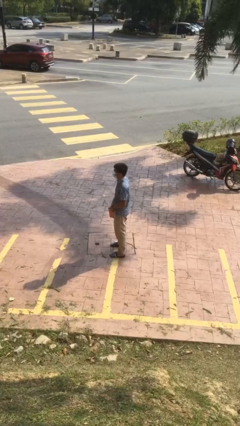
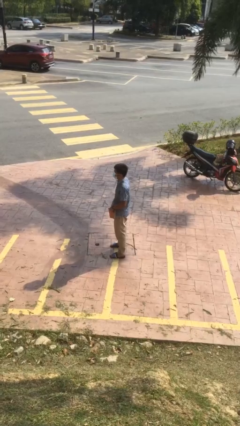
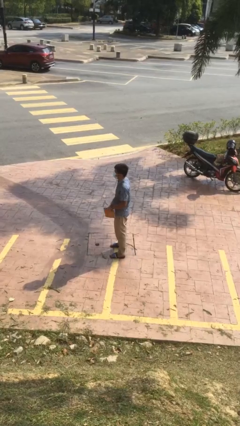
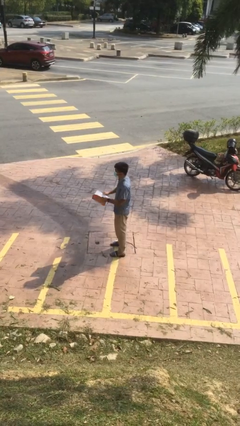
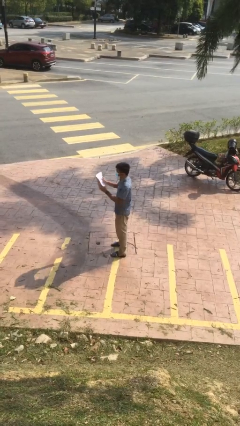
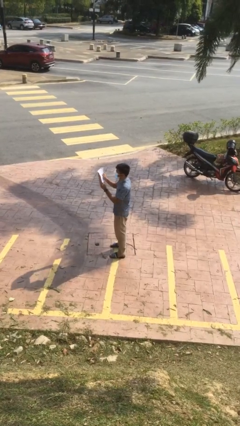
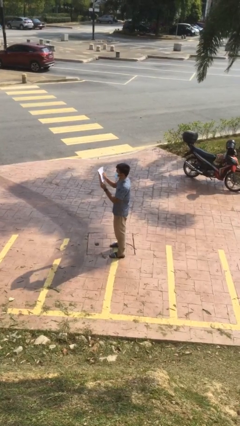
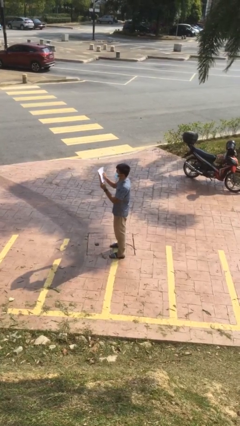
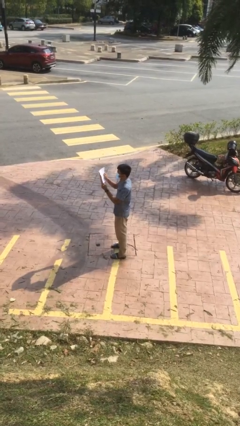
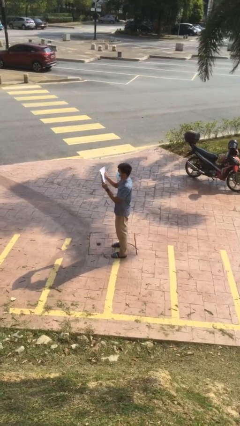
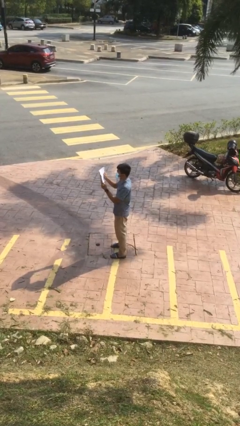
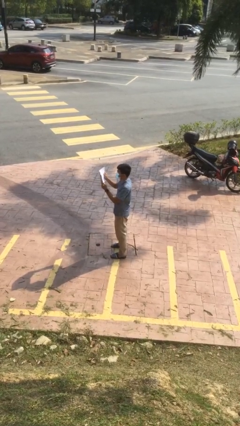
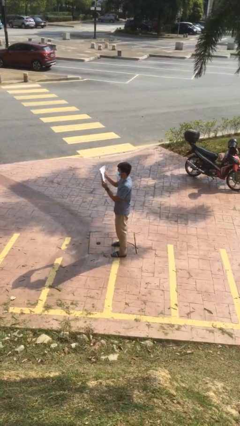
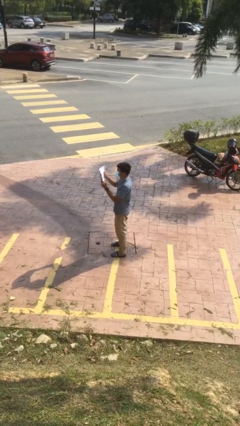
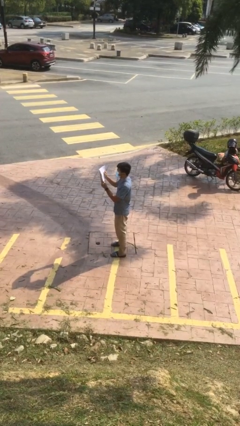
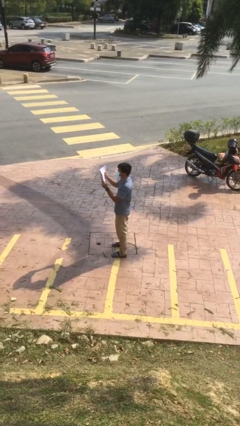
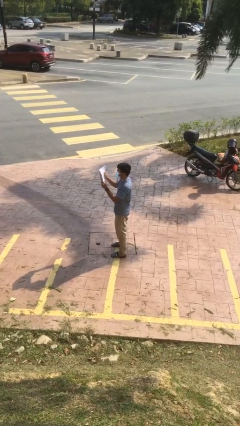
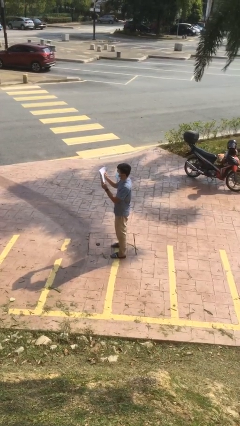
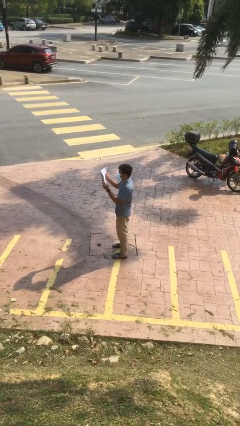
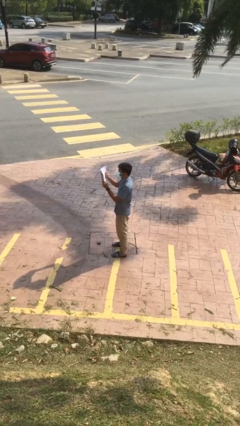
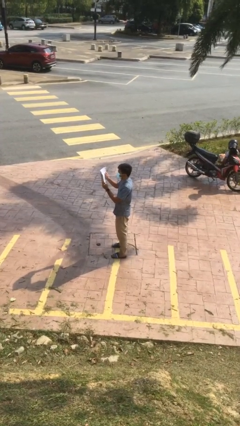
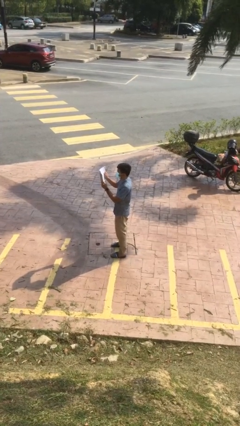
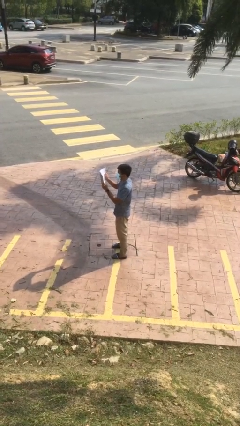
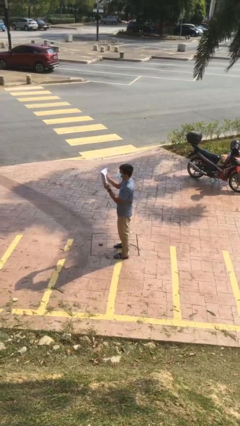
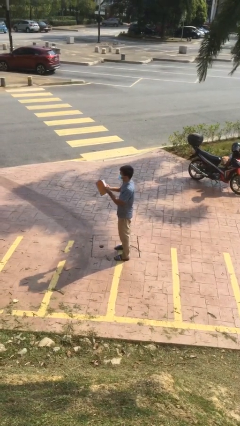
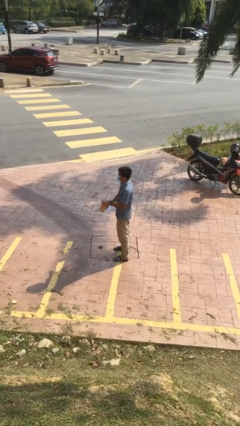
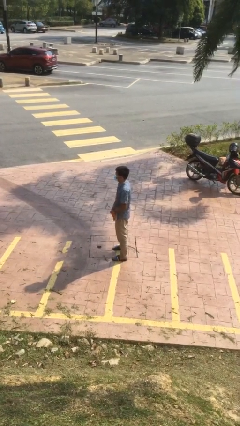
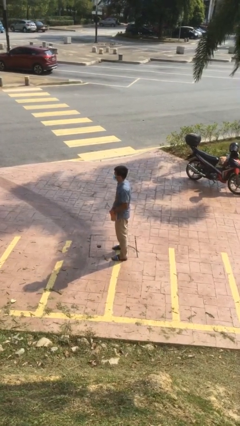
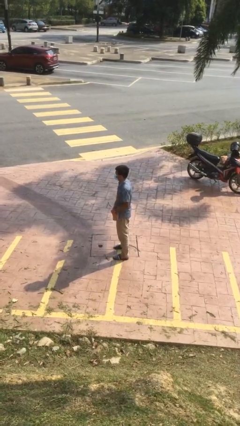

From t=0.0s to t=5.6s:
person reads document

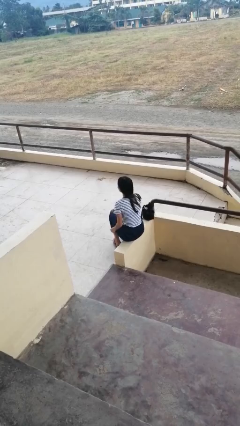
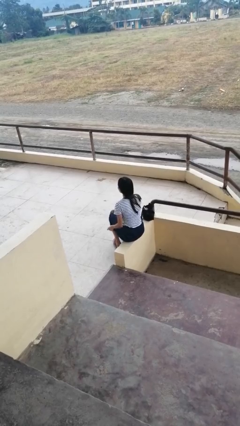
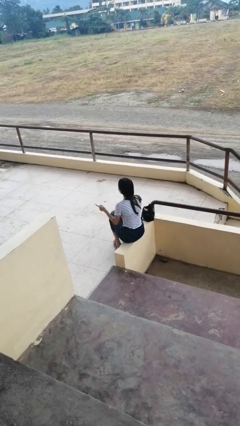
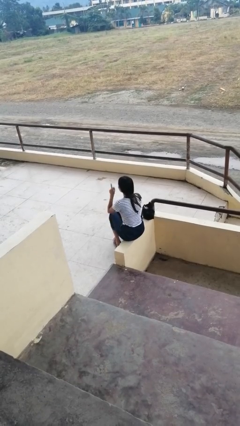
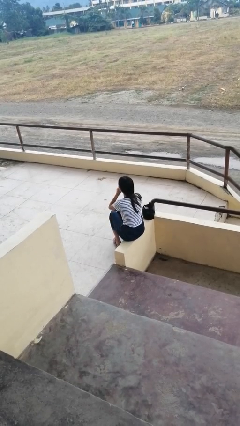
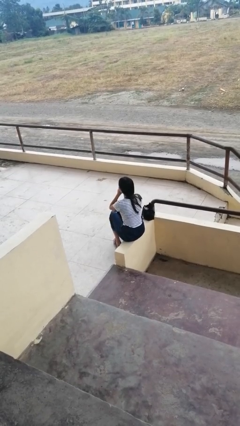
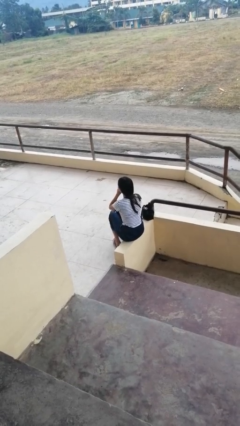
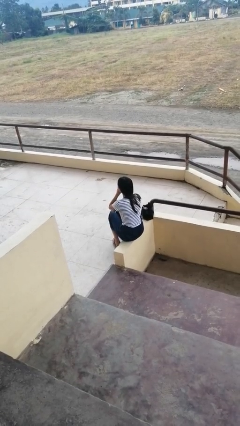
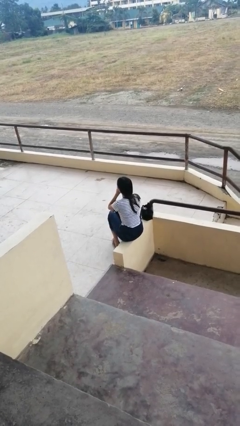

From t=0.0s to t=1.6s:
person gestures be quiet

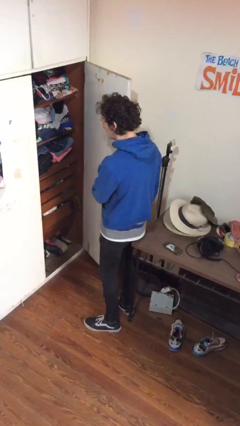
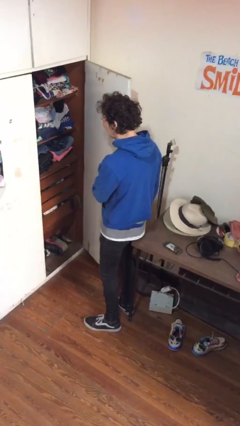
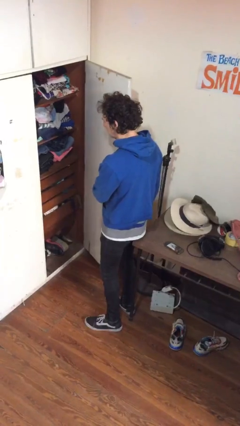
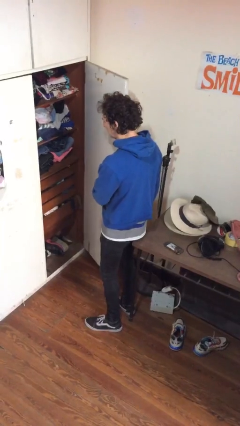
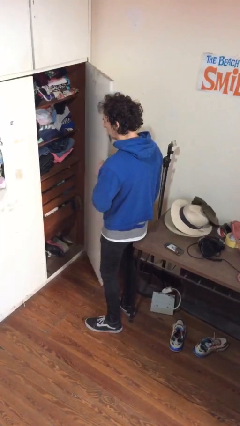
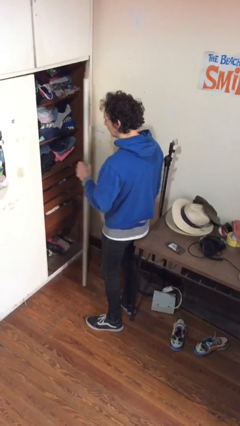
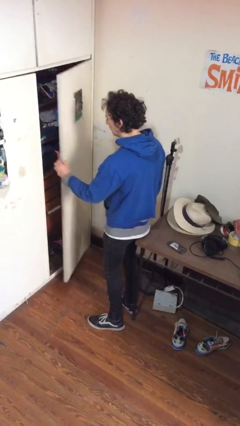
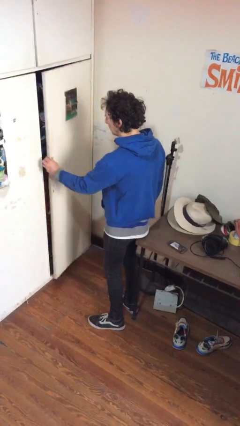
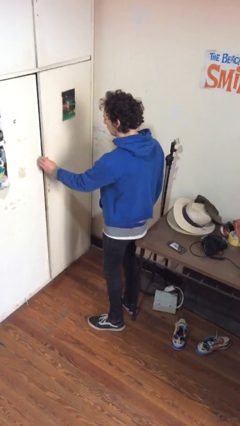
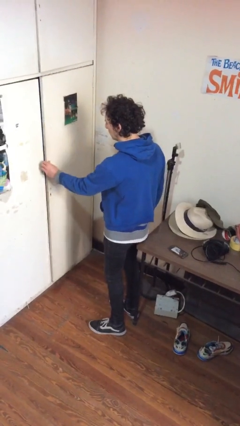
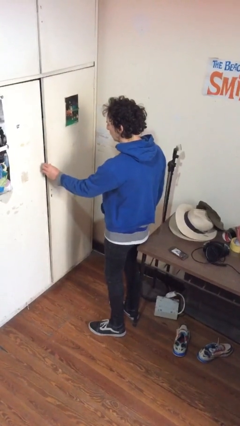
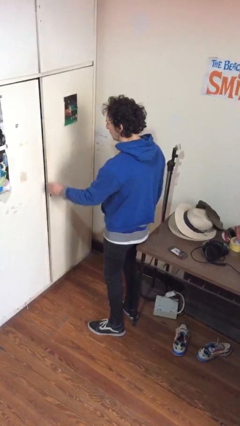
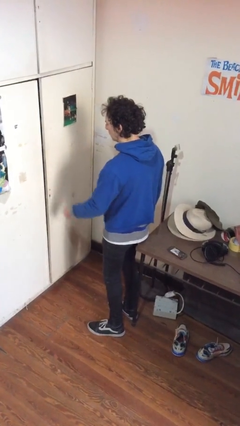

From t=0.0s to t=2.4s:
person closes closet door

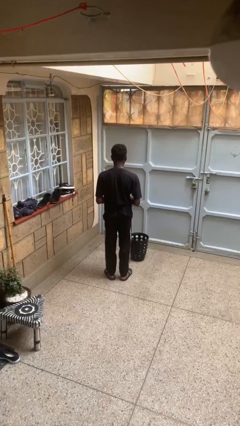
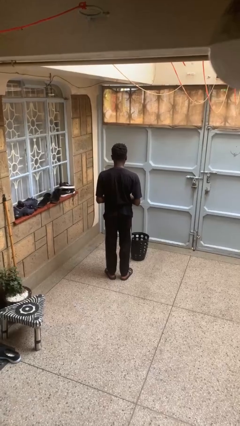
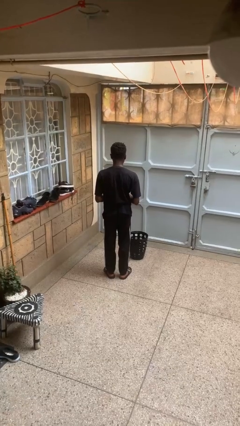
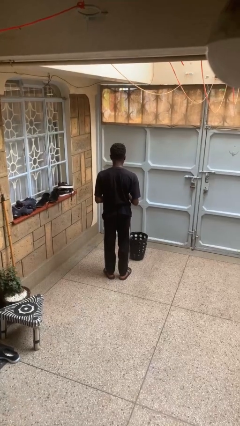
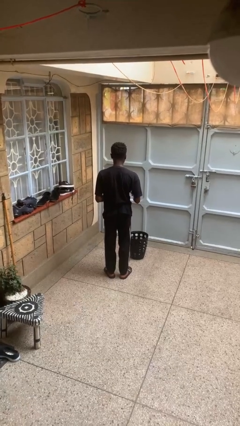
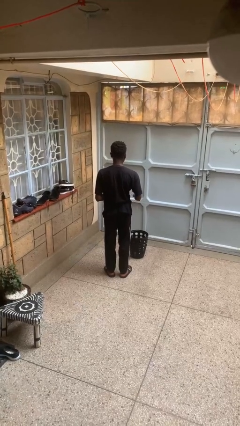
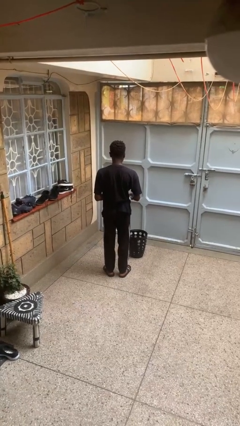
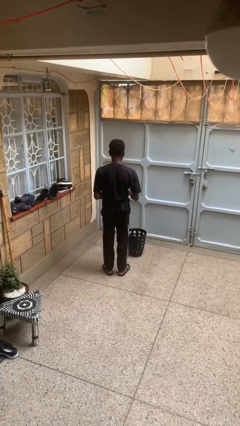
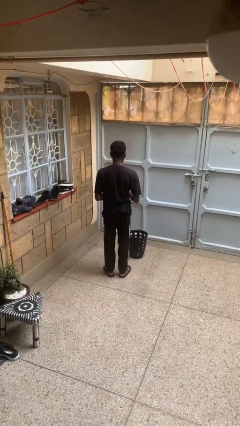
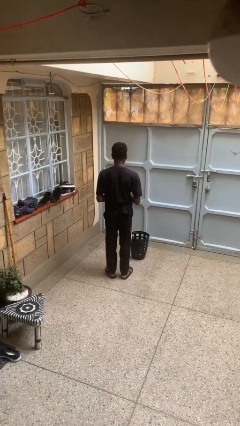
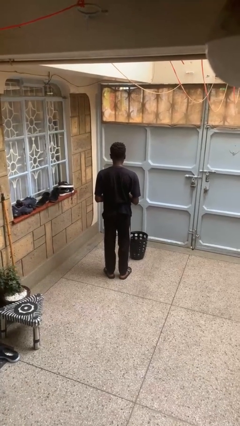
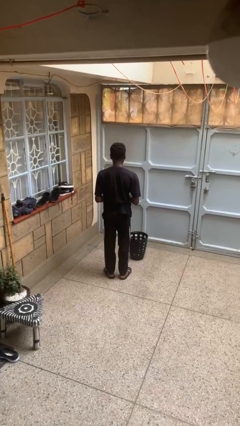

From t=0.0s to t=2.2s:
person discards trash

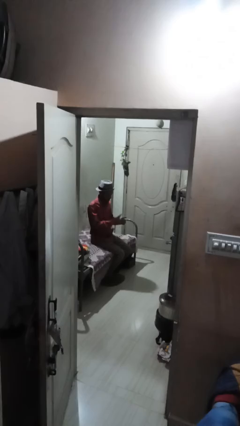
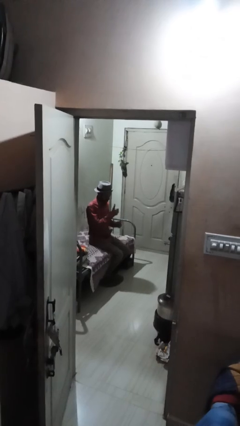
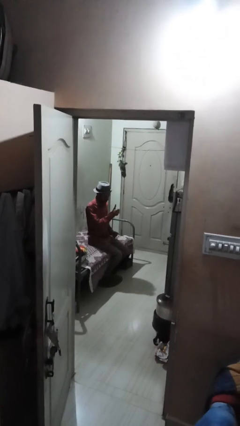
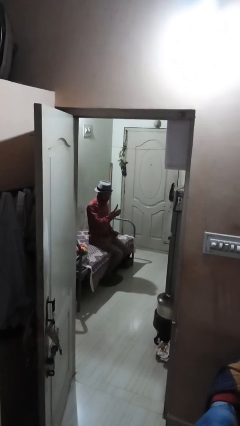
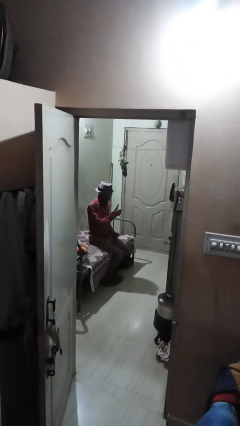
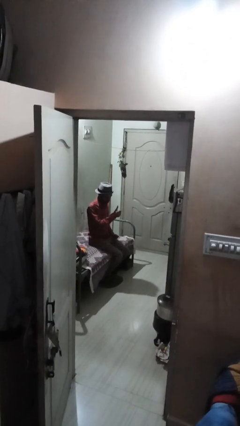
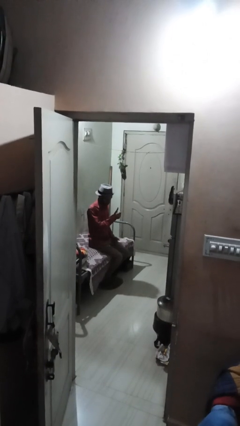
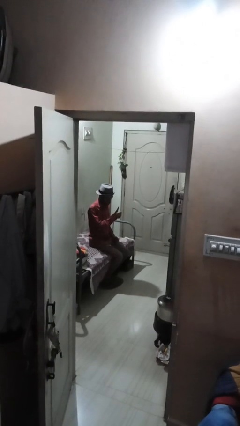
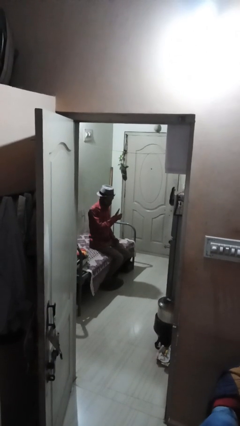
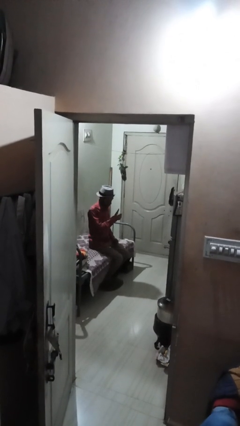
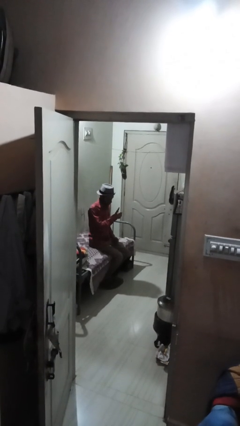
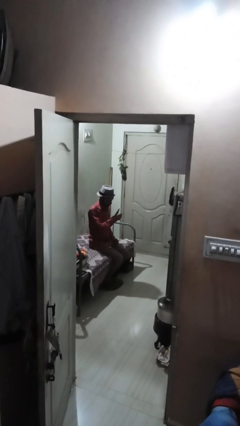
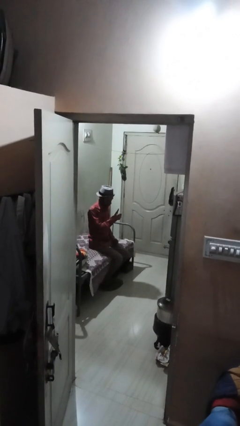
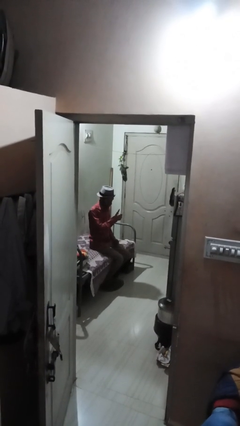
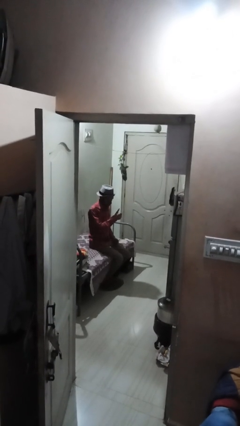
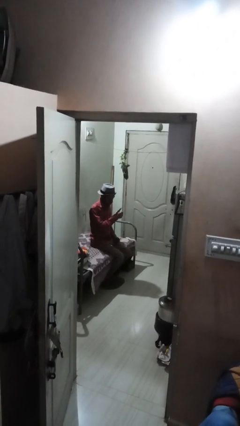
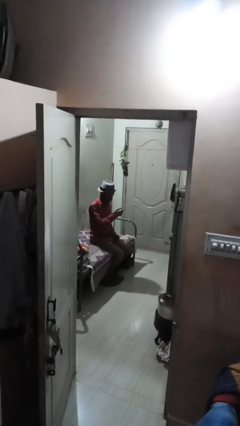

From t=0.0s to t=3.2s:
person gestures thumbs up

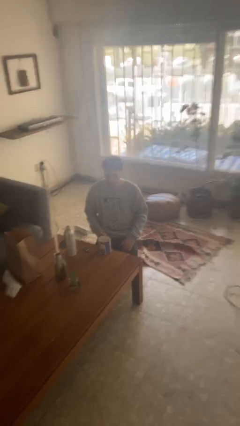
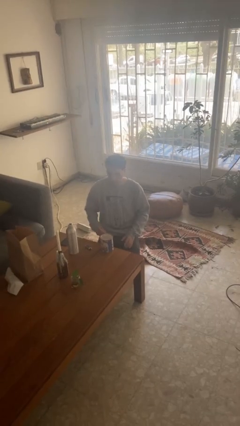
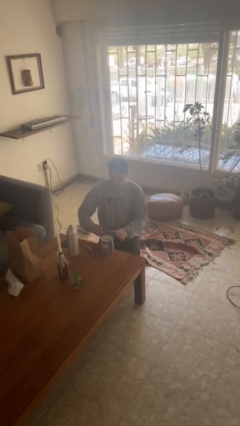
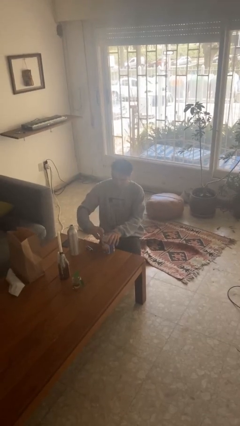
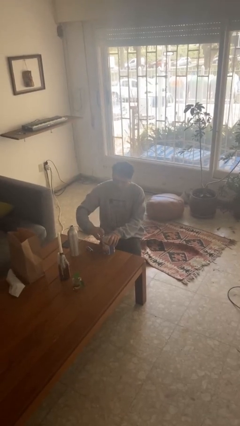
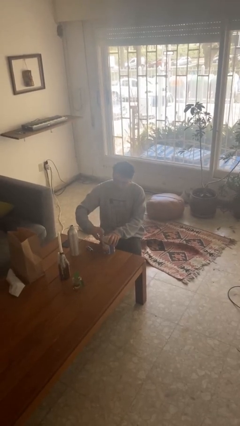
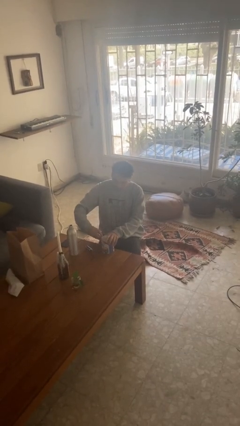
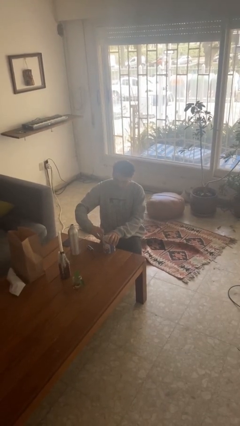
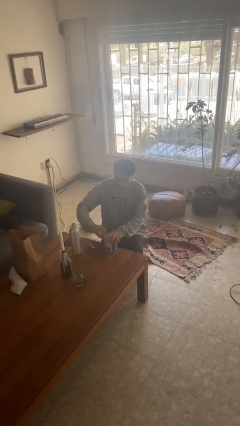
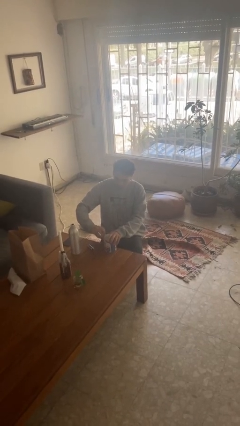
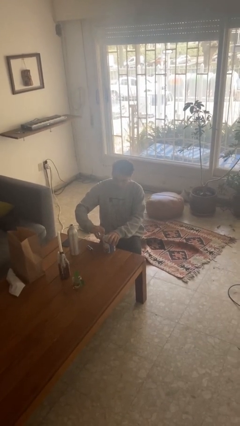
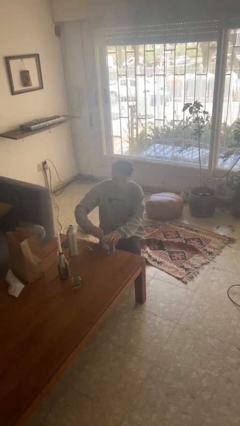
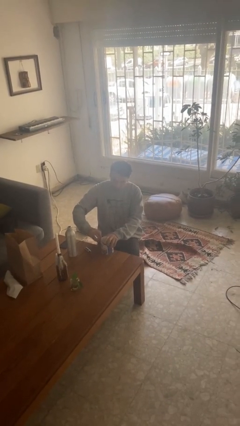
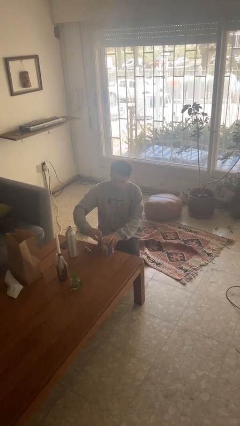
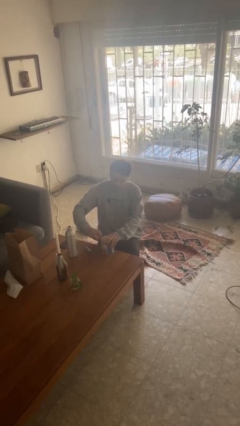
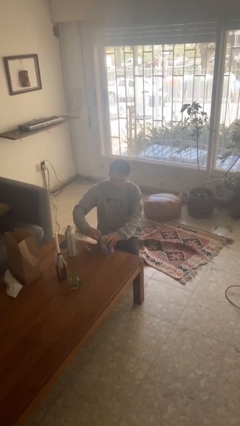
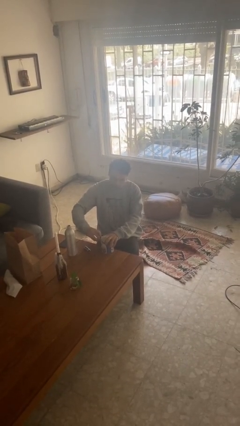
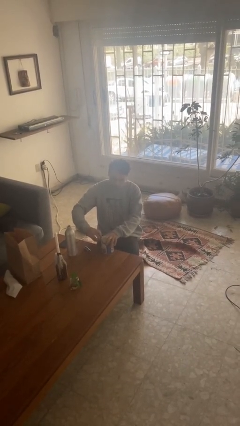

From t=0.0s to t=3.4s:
person opens can with can opener
